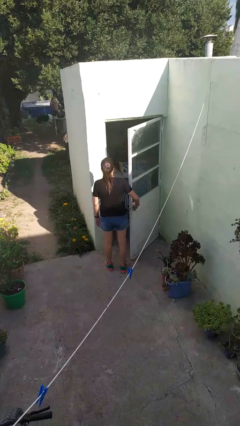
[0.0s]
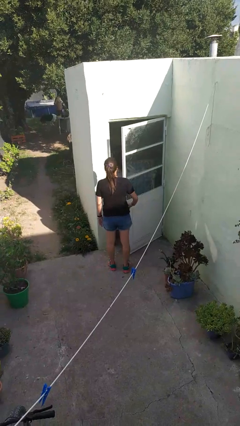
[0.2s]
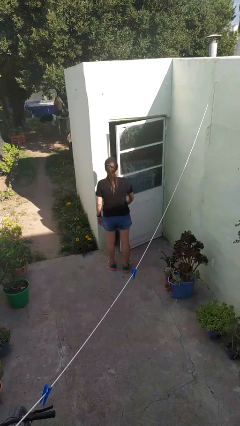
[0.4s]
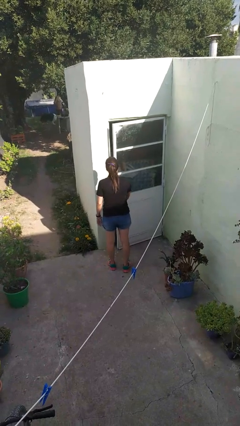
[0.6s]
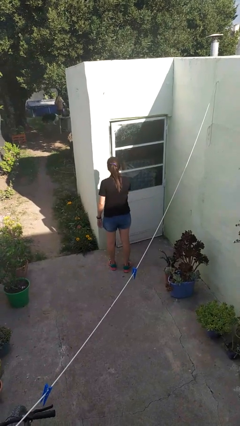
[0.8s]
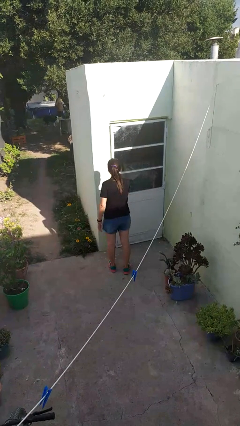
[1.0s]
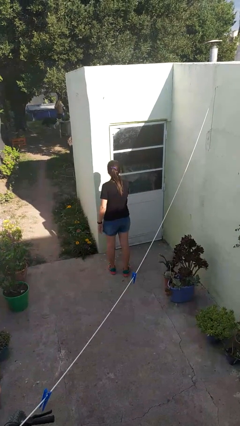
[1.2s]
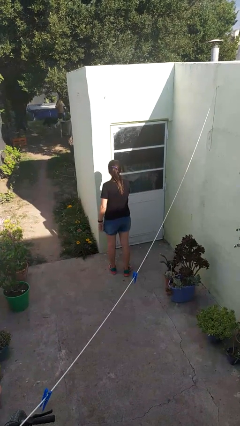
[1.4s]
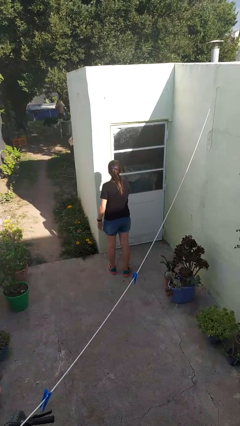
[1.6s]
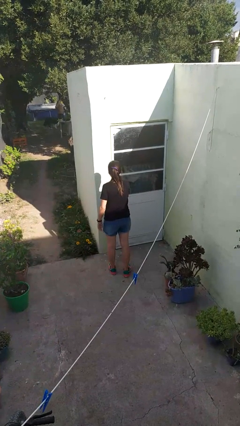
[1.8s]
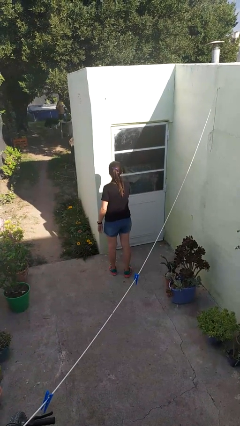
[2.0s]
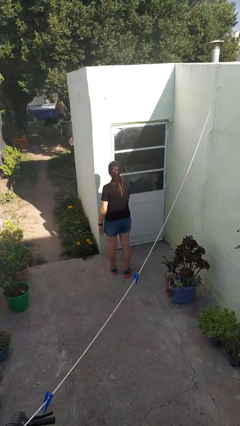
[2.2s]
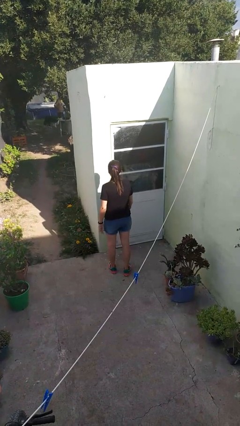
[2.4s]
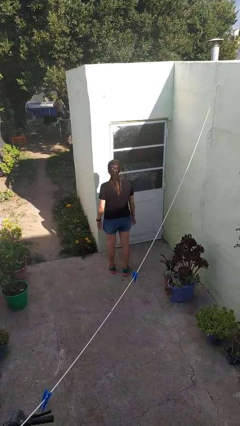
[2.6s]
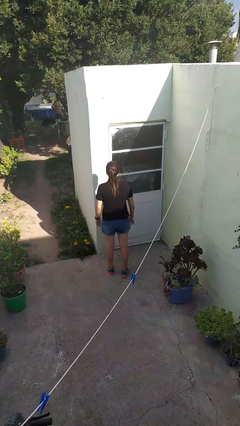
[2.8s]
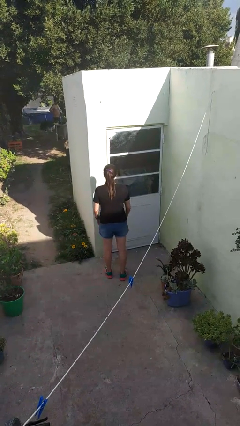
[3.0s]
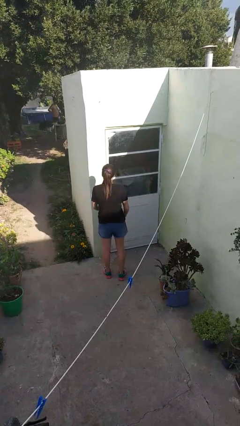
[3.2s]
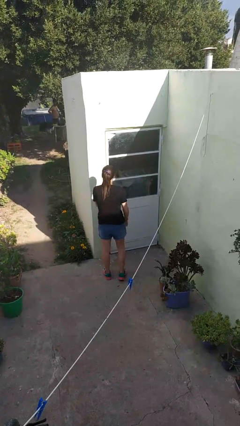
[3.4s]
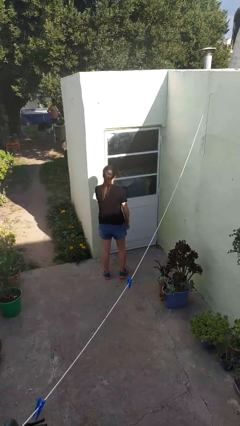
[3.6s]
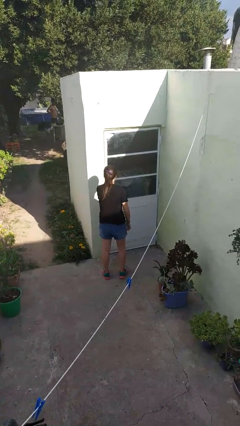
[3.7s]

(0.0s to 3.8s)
person closes facility door

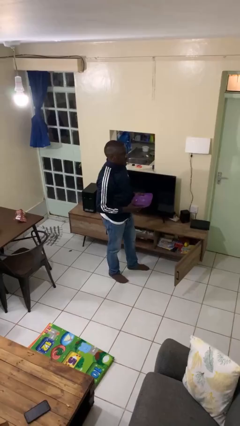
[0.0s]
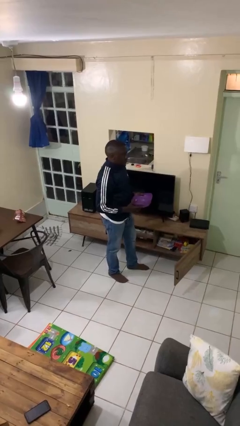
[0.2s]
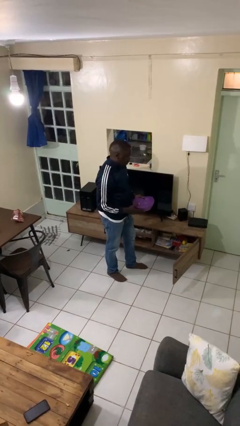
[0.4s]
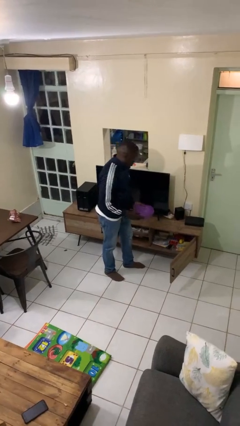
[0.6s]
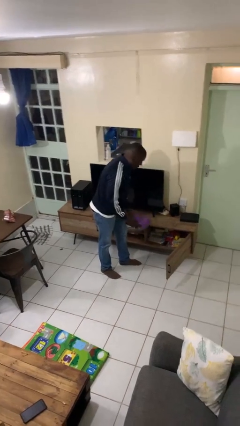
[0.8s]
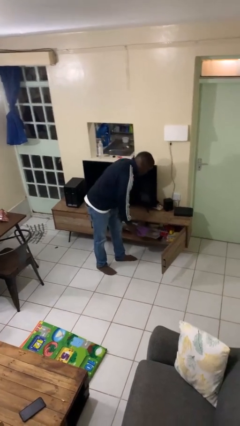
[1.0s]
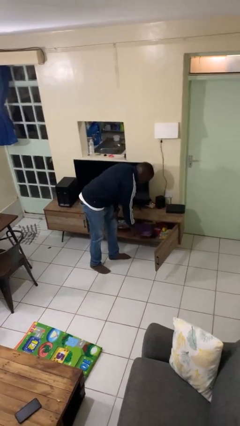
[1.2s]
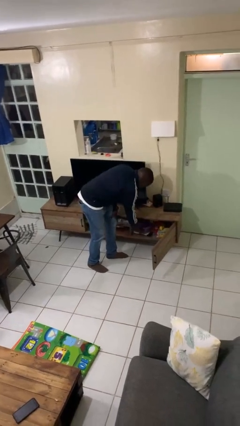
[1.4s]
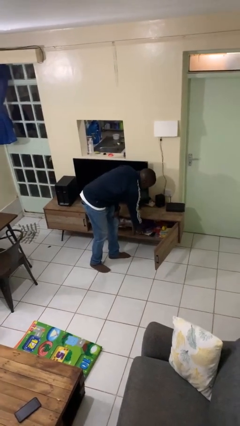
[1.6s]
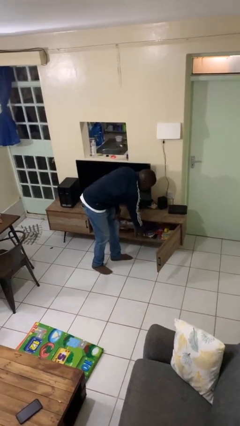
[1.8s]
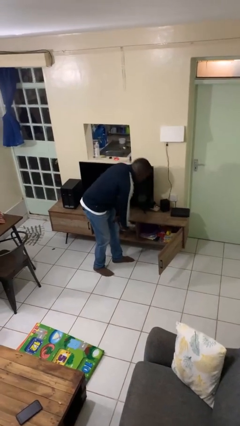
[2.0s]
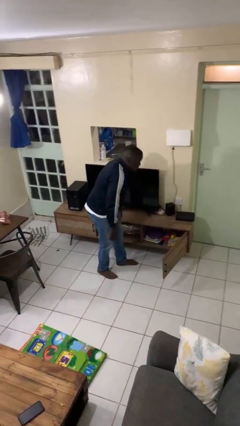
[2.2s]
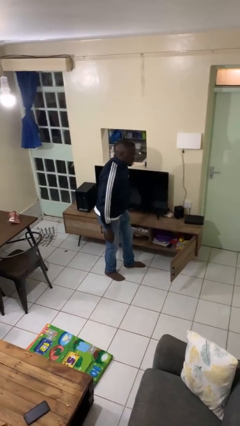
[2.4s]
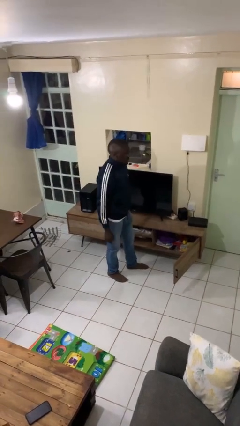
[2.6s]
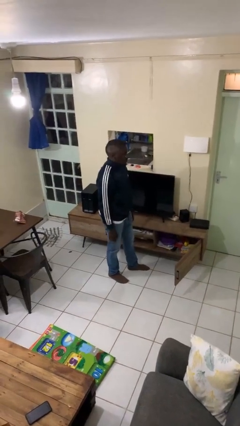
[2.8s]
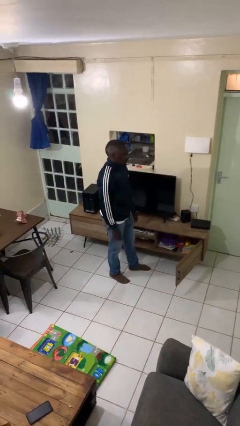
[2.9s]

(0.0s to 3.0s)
person puts down object into cabinet

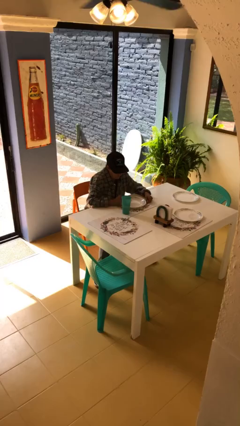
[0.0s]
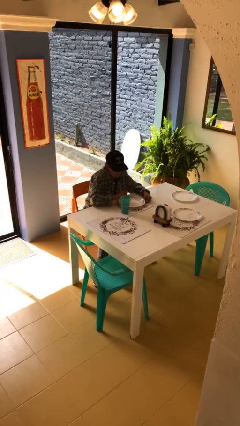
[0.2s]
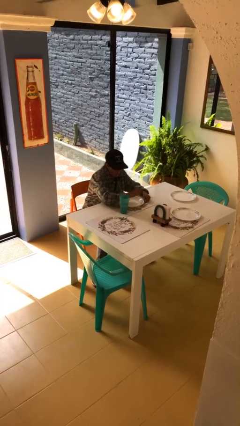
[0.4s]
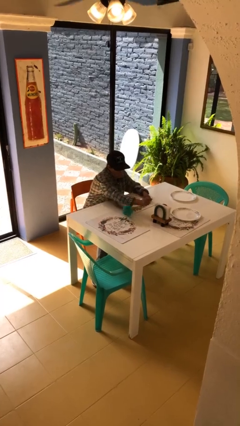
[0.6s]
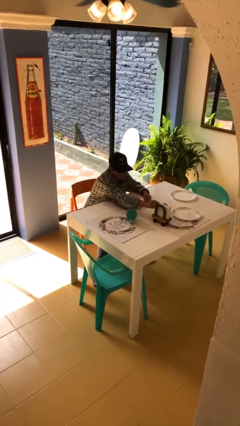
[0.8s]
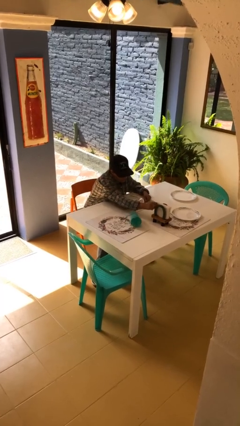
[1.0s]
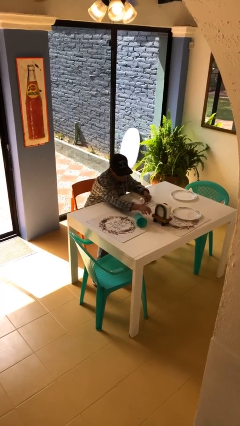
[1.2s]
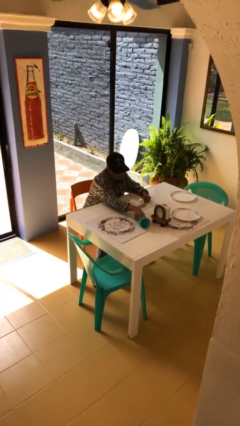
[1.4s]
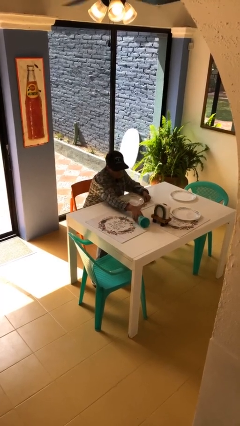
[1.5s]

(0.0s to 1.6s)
person knocks over glass

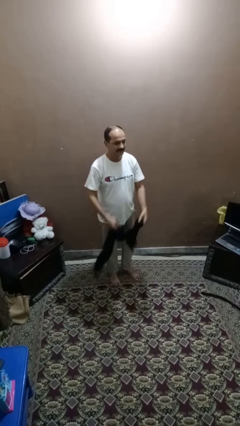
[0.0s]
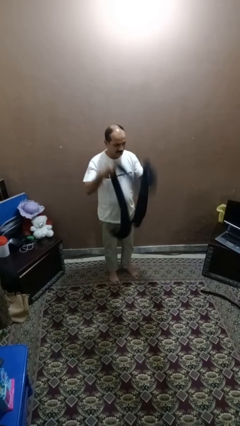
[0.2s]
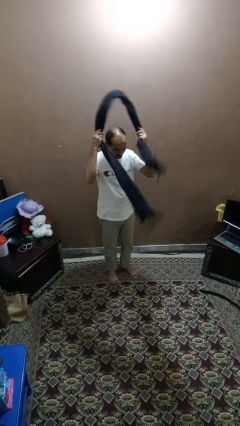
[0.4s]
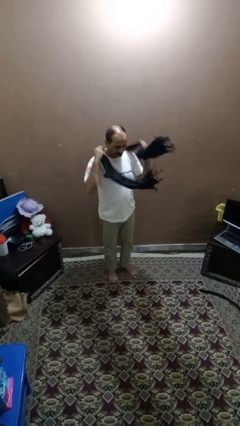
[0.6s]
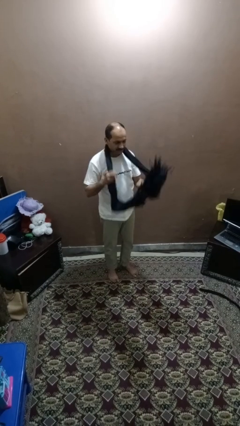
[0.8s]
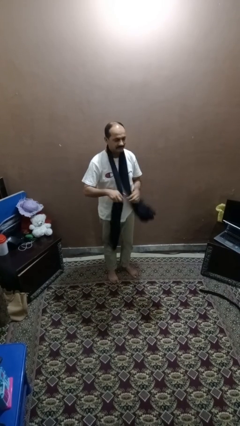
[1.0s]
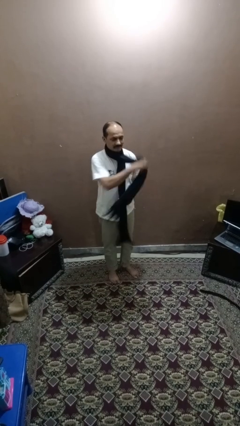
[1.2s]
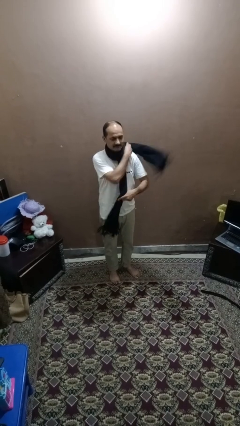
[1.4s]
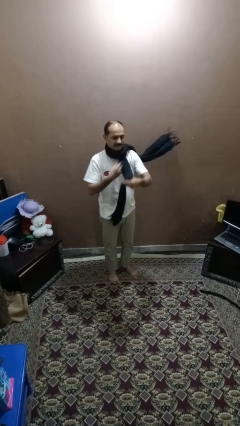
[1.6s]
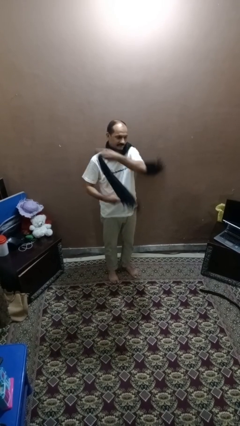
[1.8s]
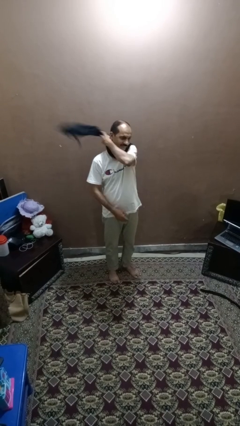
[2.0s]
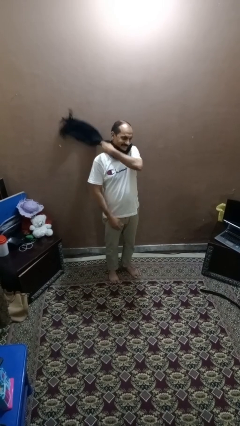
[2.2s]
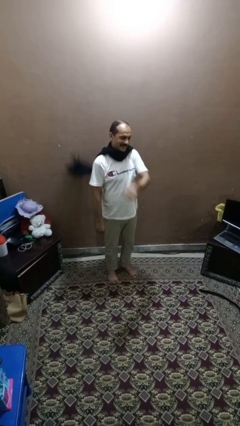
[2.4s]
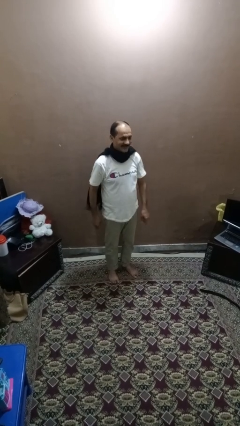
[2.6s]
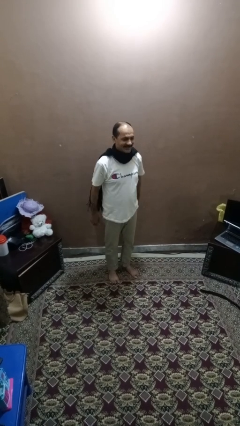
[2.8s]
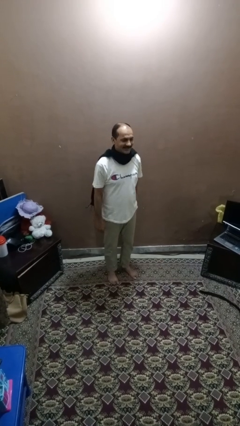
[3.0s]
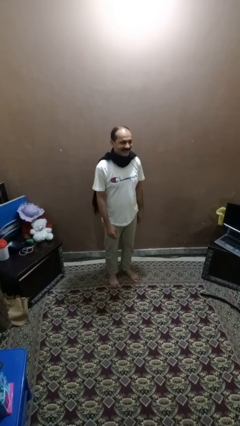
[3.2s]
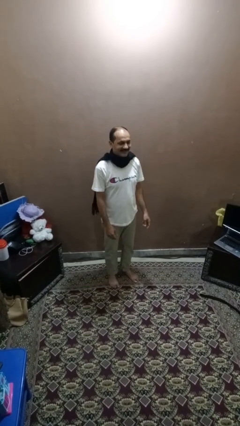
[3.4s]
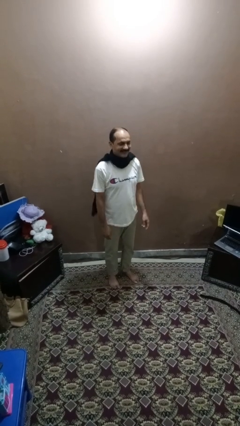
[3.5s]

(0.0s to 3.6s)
person puts on scarf

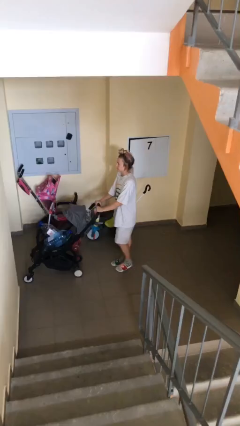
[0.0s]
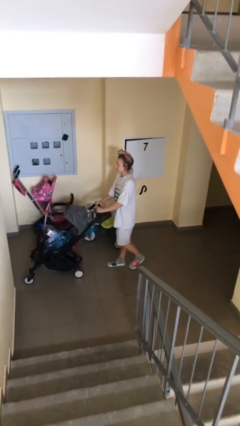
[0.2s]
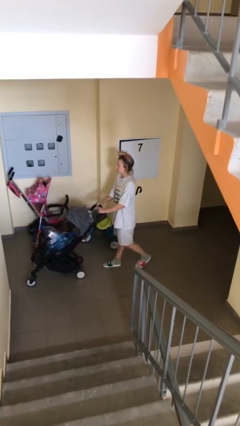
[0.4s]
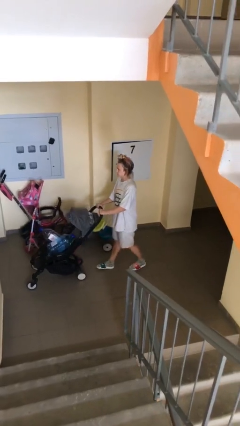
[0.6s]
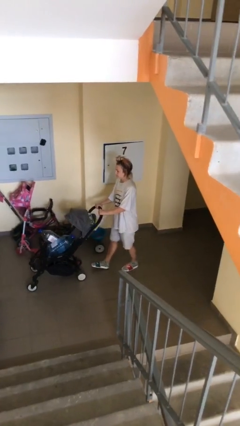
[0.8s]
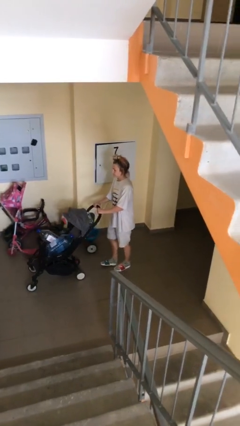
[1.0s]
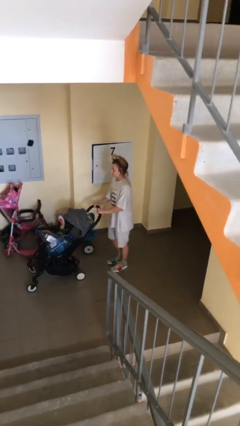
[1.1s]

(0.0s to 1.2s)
person pulls wheeled cart

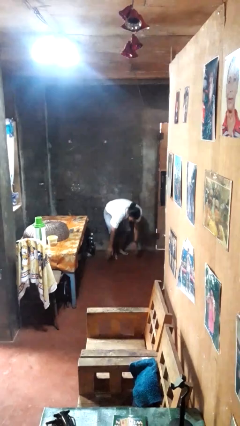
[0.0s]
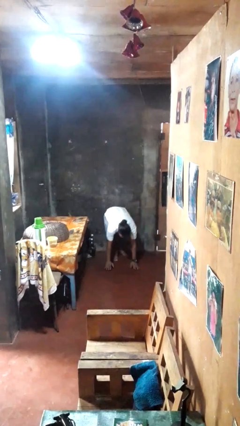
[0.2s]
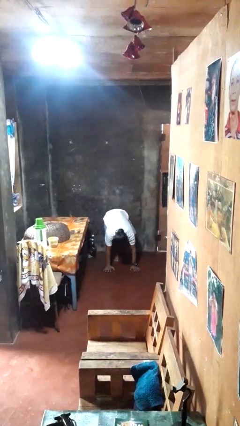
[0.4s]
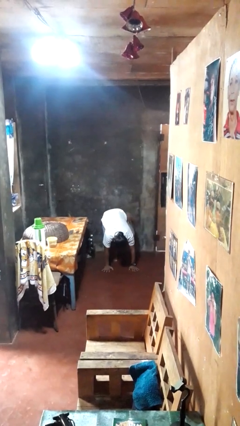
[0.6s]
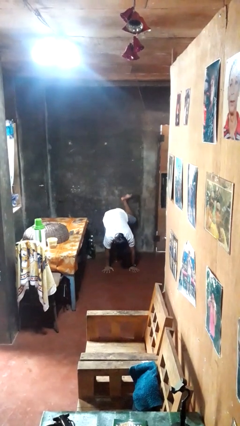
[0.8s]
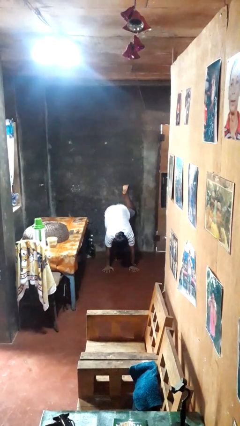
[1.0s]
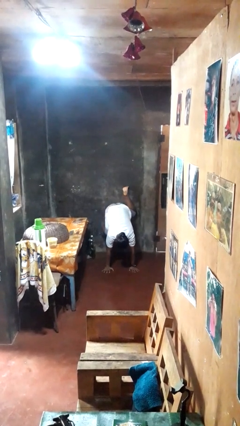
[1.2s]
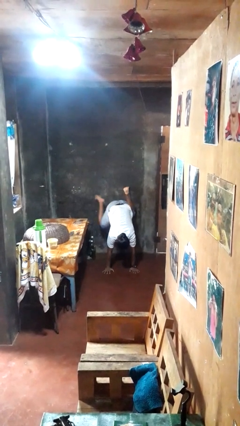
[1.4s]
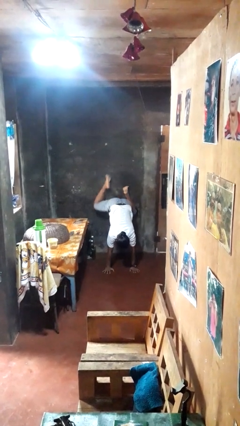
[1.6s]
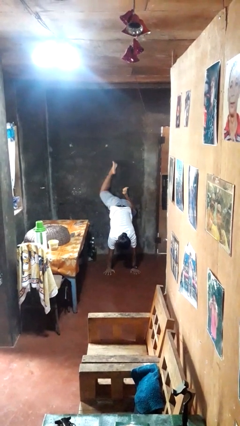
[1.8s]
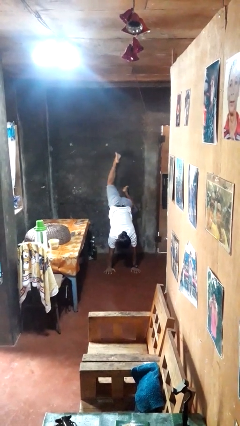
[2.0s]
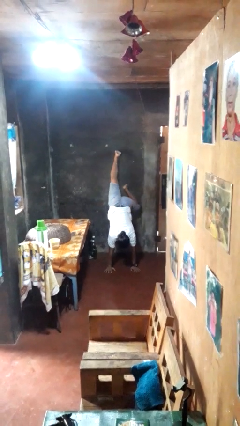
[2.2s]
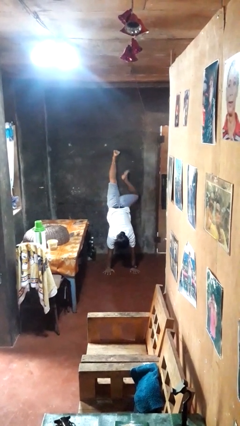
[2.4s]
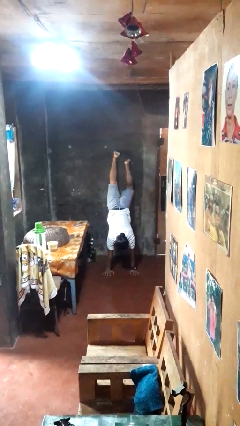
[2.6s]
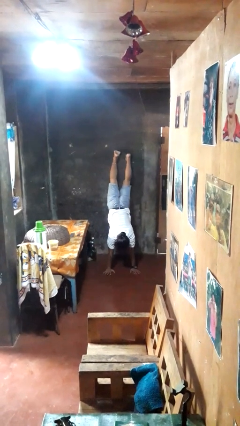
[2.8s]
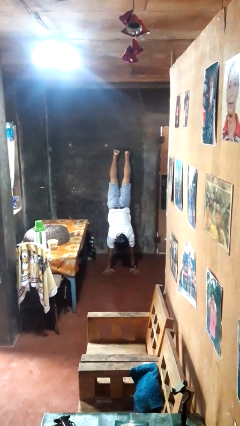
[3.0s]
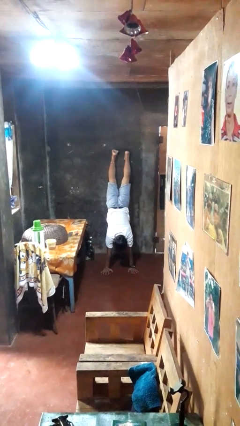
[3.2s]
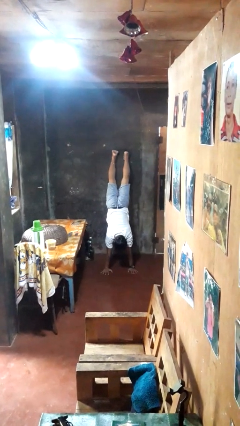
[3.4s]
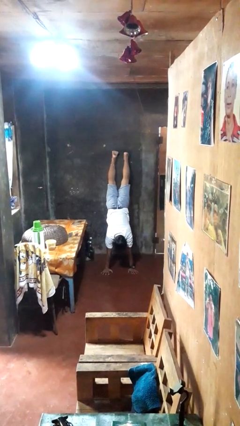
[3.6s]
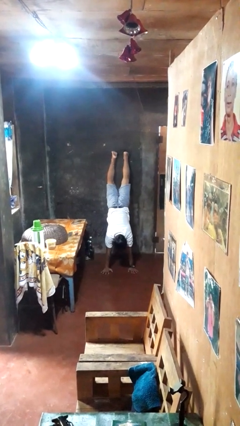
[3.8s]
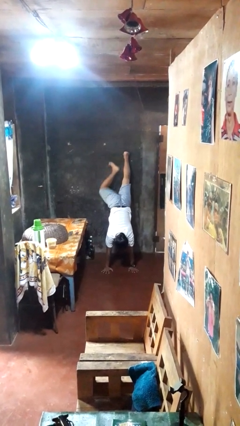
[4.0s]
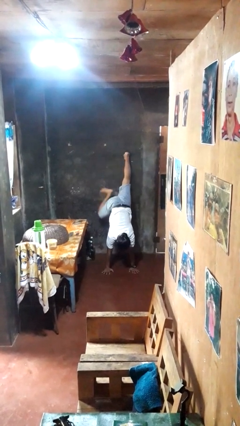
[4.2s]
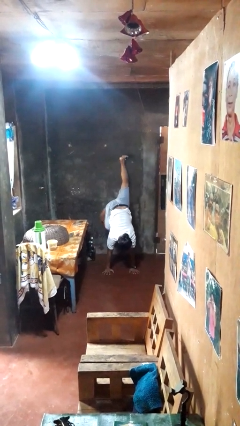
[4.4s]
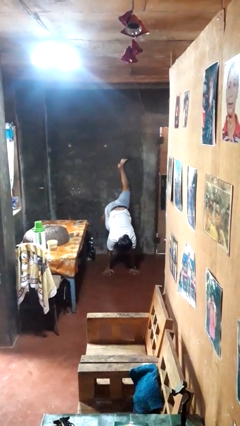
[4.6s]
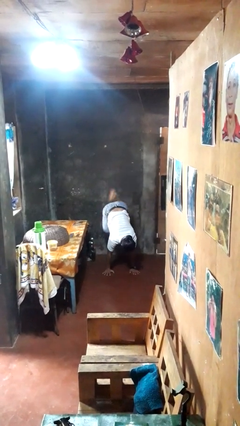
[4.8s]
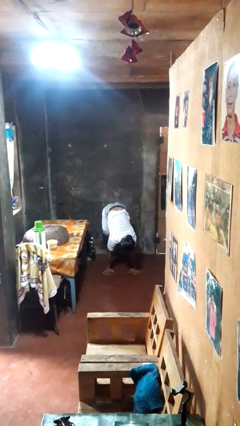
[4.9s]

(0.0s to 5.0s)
person handstand
